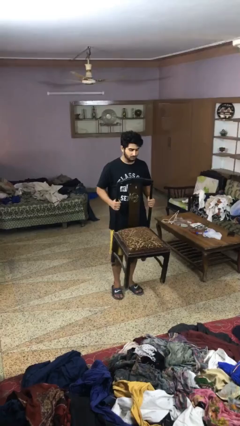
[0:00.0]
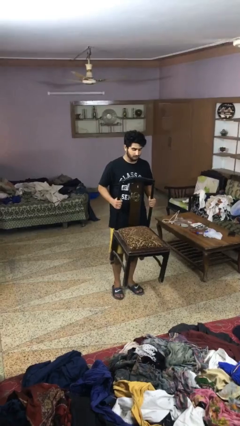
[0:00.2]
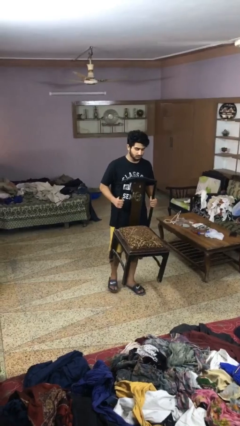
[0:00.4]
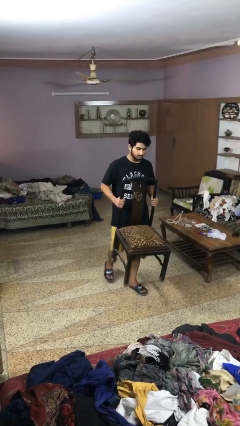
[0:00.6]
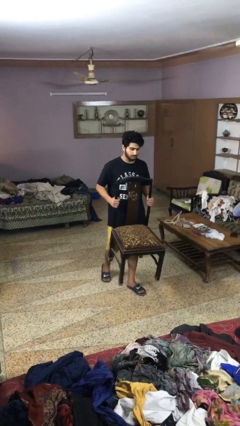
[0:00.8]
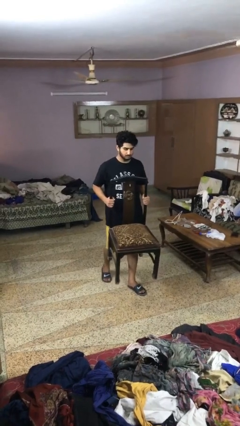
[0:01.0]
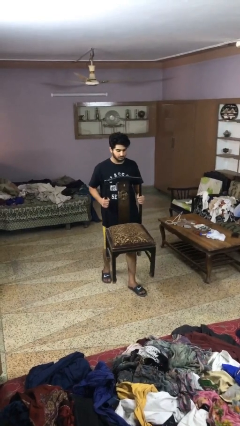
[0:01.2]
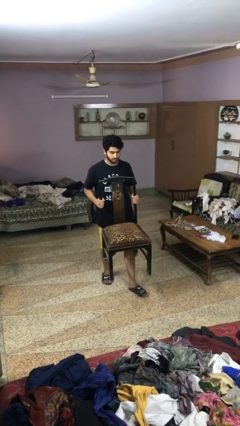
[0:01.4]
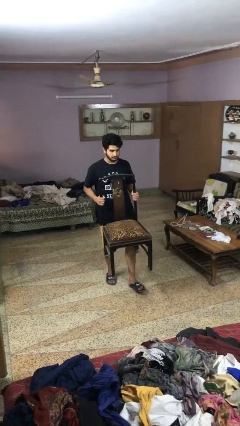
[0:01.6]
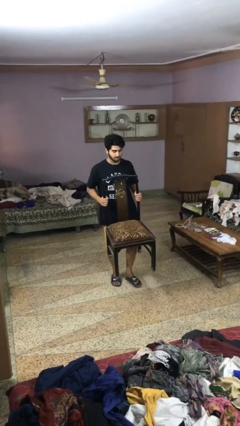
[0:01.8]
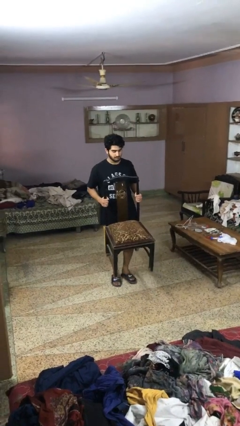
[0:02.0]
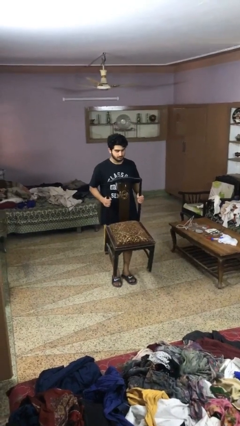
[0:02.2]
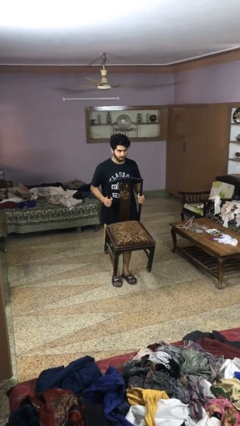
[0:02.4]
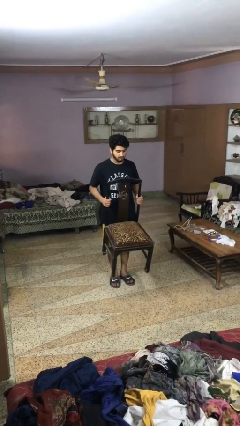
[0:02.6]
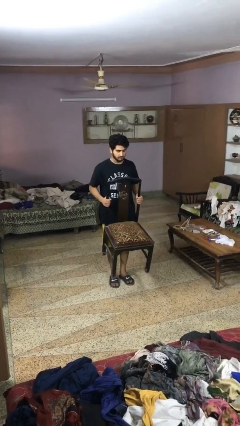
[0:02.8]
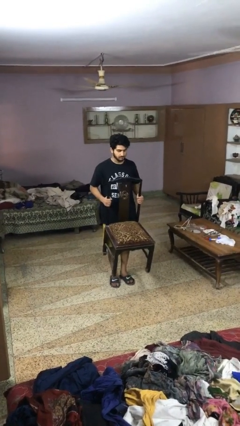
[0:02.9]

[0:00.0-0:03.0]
person carries furniture

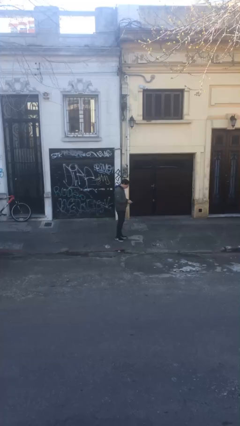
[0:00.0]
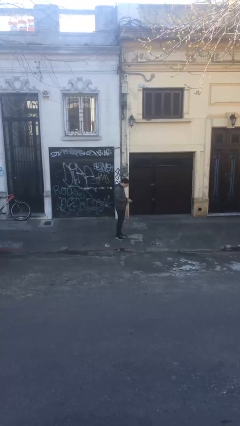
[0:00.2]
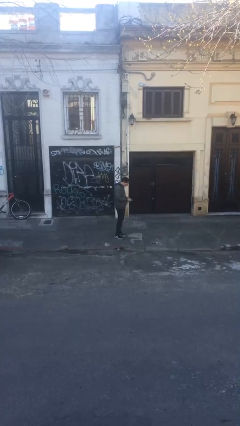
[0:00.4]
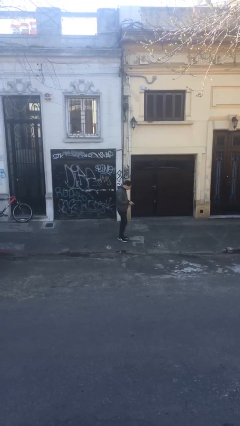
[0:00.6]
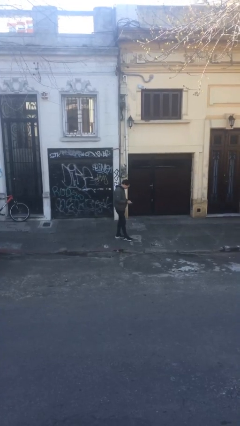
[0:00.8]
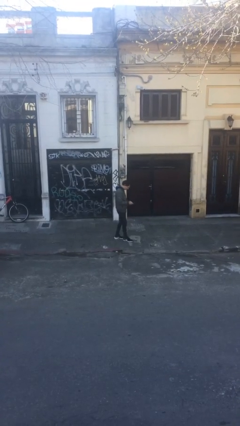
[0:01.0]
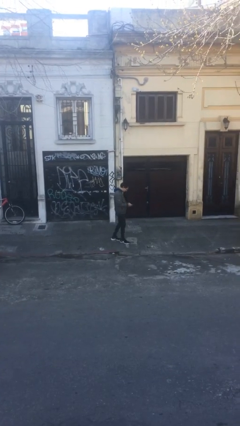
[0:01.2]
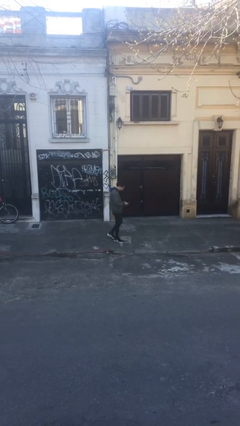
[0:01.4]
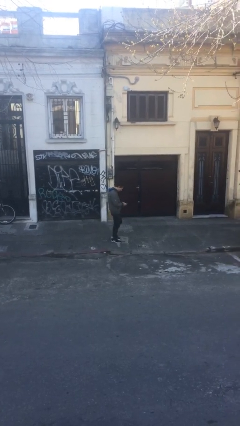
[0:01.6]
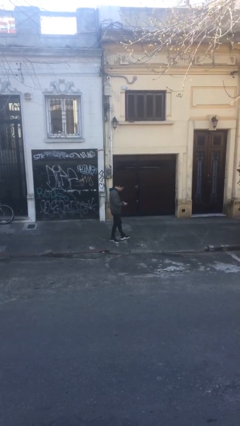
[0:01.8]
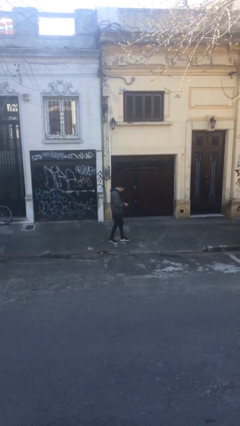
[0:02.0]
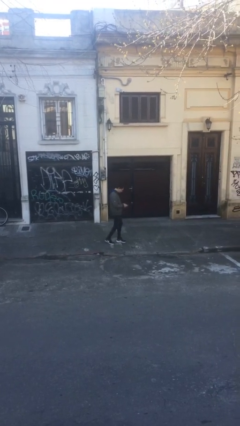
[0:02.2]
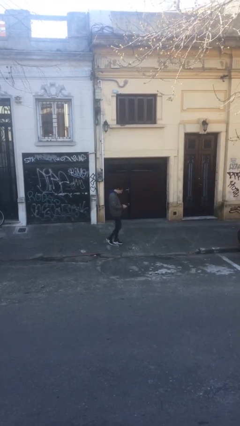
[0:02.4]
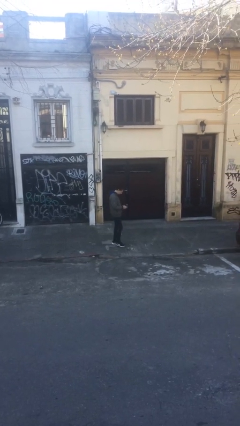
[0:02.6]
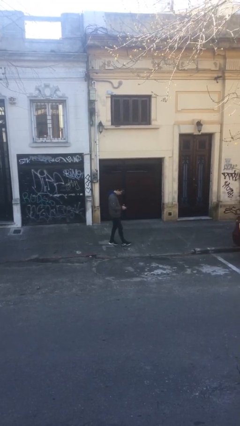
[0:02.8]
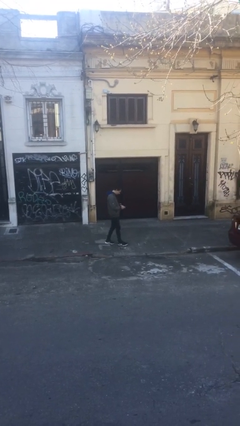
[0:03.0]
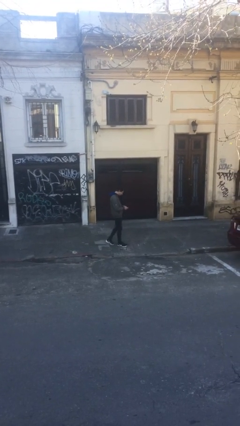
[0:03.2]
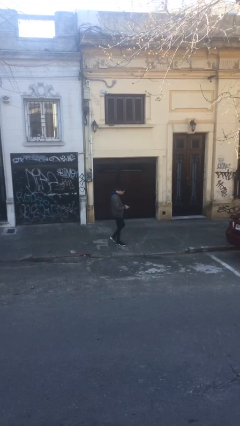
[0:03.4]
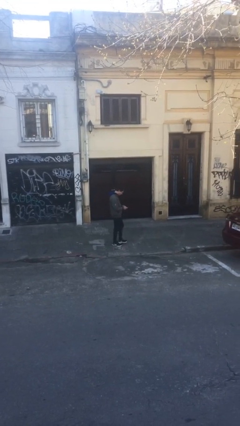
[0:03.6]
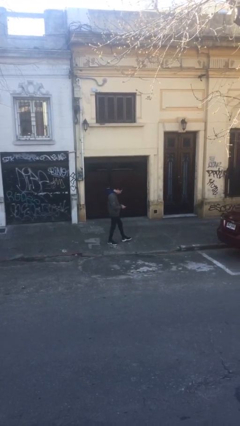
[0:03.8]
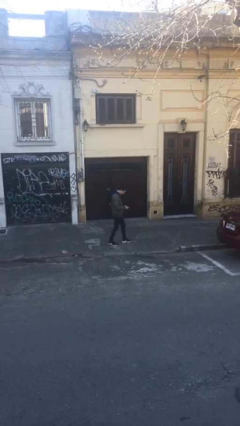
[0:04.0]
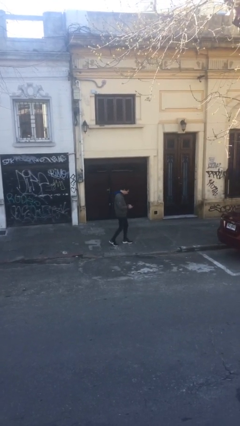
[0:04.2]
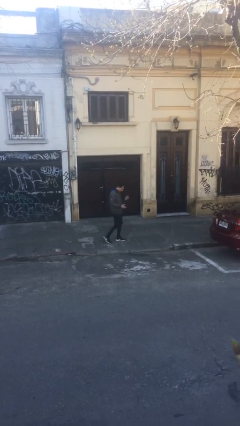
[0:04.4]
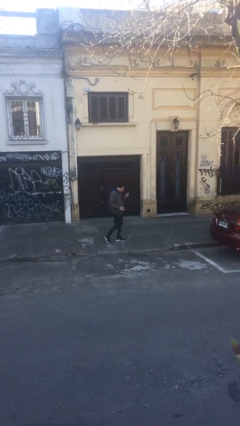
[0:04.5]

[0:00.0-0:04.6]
person texts on phone

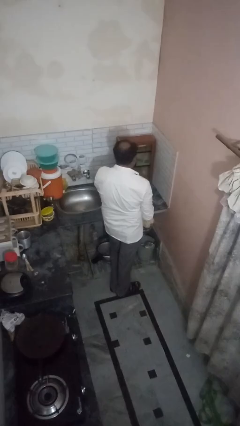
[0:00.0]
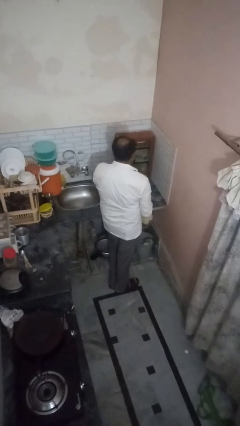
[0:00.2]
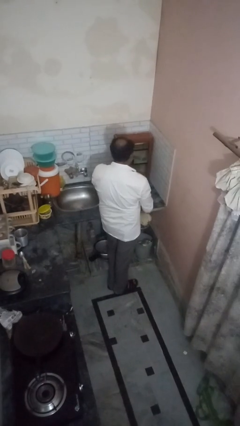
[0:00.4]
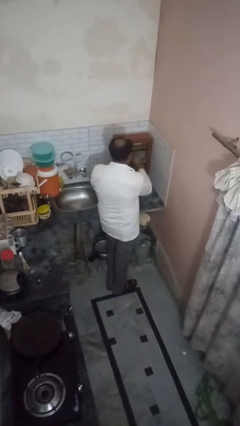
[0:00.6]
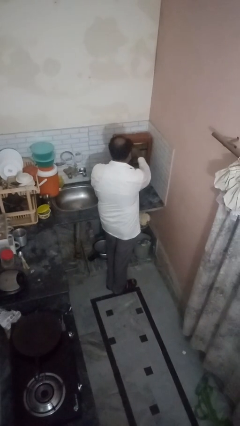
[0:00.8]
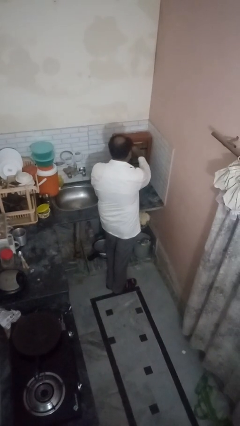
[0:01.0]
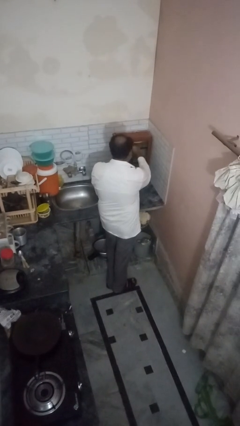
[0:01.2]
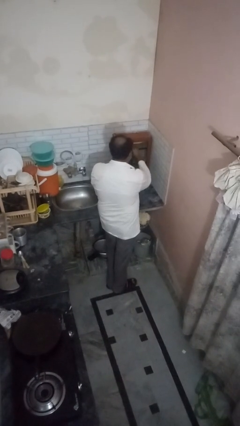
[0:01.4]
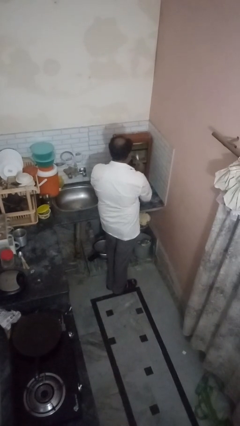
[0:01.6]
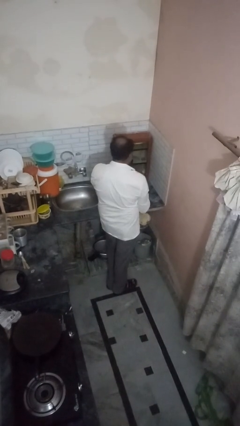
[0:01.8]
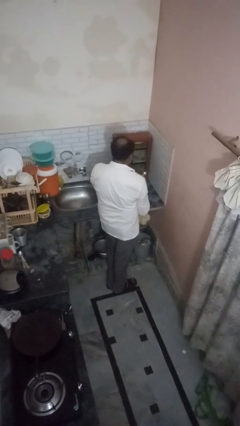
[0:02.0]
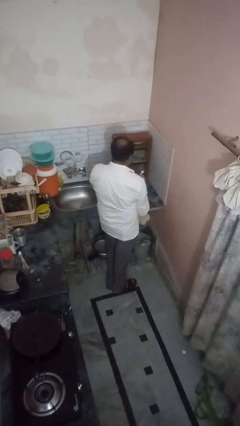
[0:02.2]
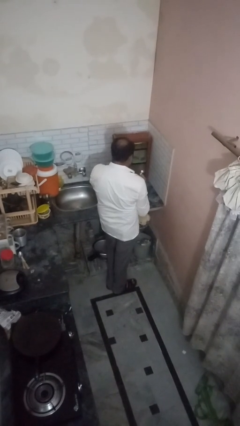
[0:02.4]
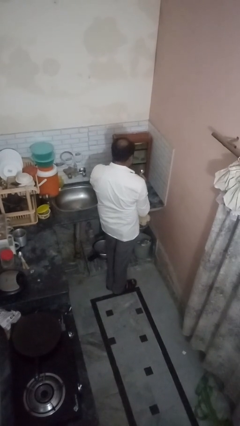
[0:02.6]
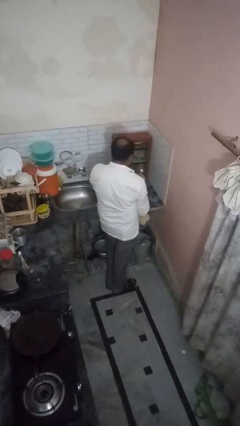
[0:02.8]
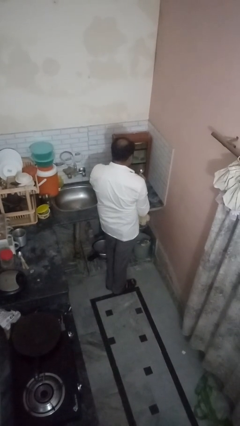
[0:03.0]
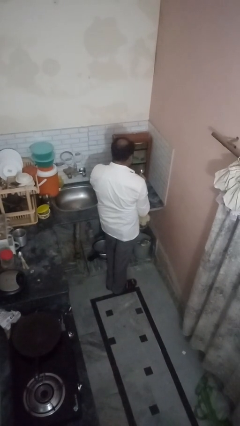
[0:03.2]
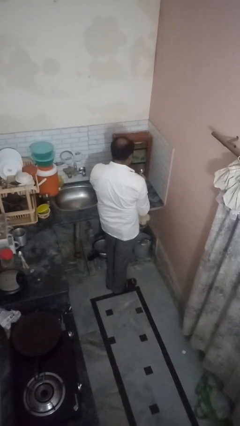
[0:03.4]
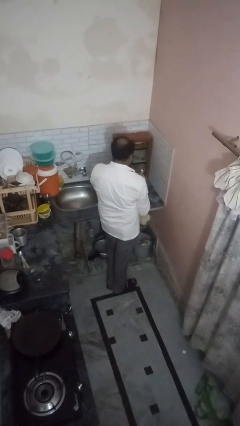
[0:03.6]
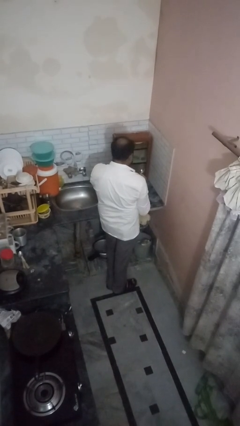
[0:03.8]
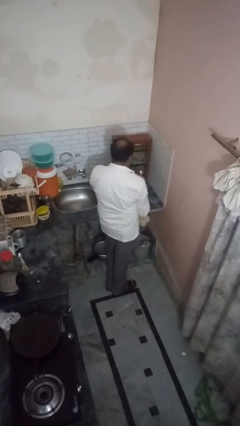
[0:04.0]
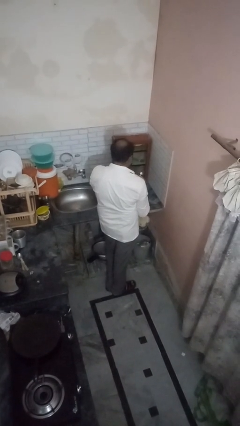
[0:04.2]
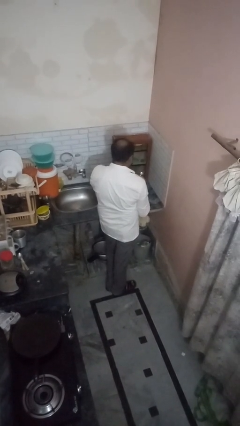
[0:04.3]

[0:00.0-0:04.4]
person takes object from kitchen drawer

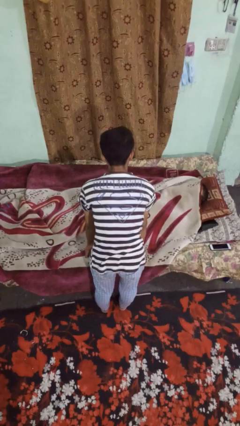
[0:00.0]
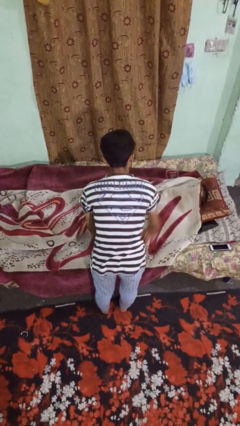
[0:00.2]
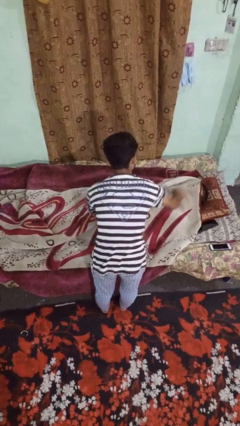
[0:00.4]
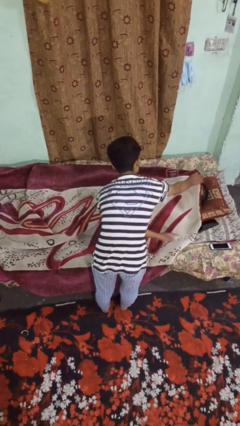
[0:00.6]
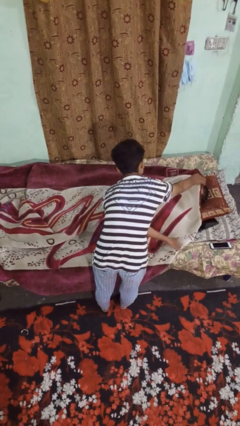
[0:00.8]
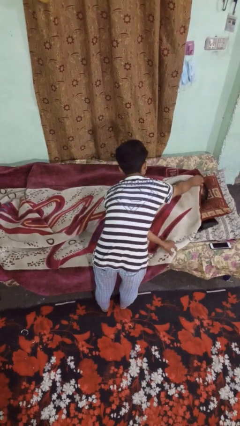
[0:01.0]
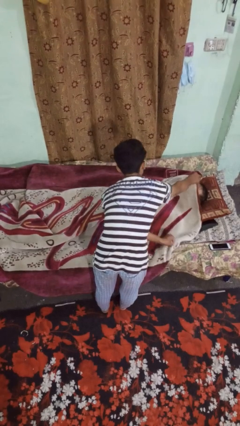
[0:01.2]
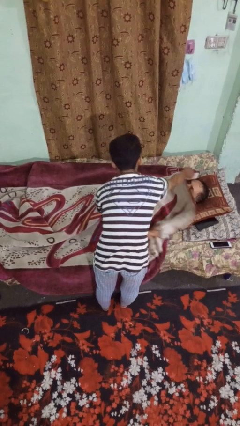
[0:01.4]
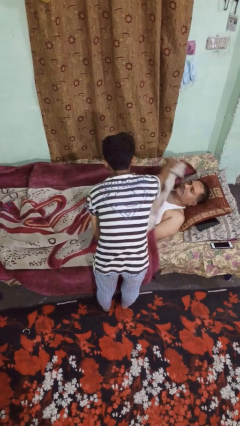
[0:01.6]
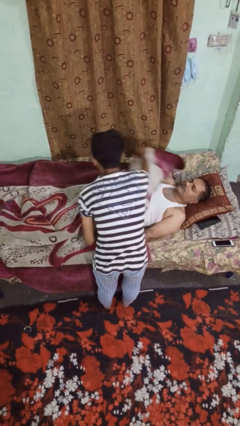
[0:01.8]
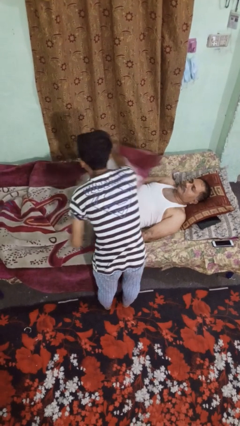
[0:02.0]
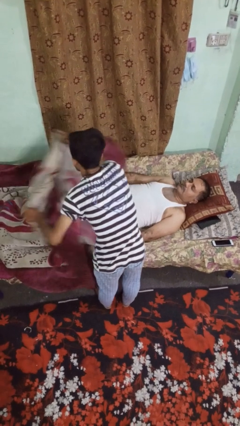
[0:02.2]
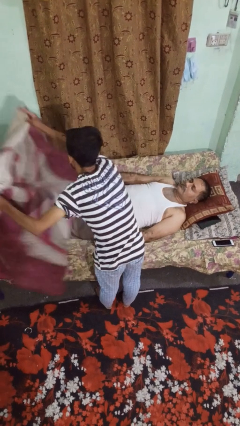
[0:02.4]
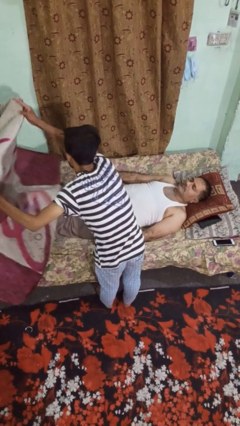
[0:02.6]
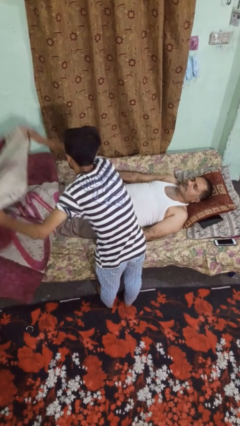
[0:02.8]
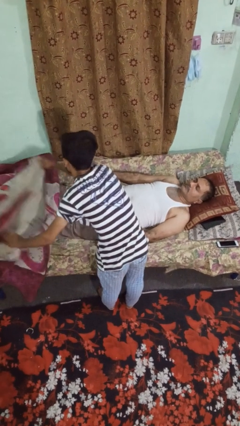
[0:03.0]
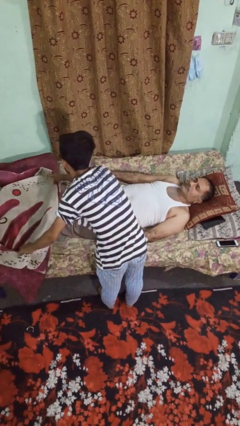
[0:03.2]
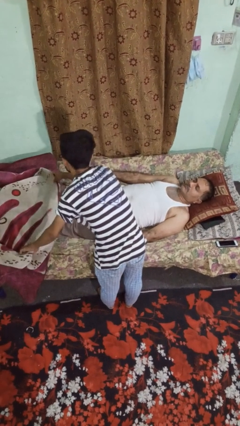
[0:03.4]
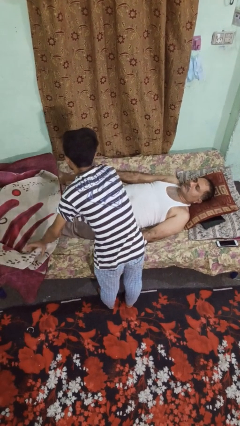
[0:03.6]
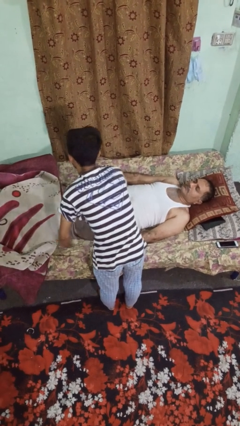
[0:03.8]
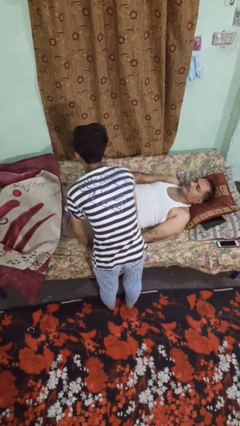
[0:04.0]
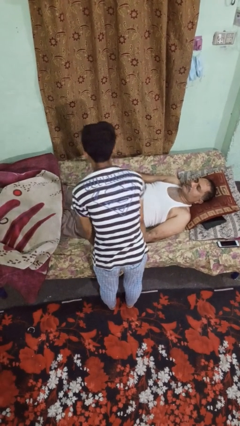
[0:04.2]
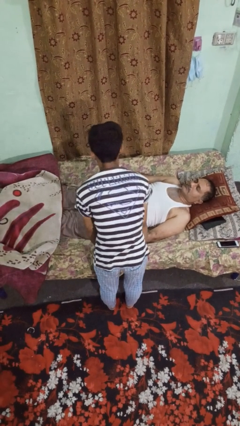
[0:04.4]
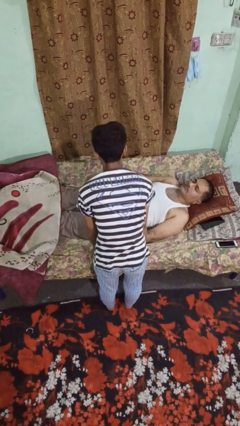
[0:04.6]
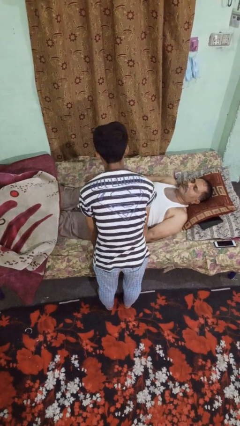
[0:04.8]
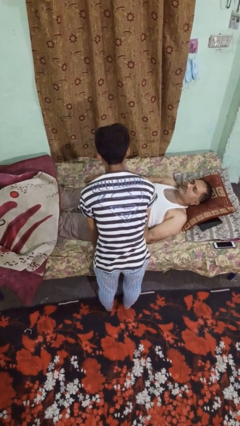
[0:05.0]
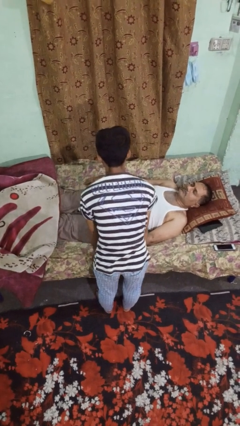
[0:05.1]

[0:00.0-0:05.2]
person uncovers friend with blanket
